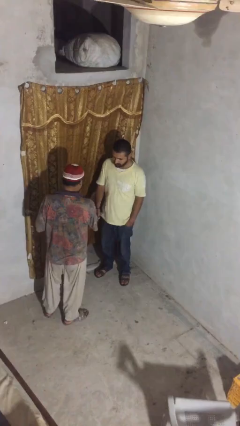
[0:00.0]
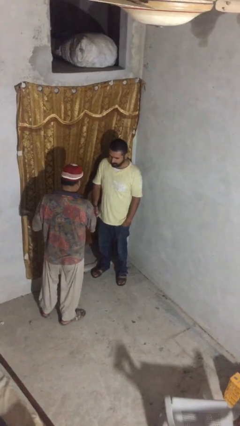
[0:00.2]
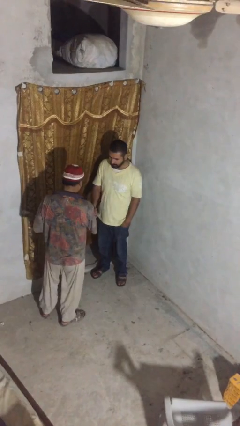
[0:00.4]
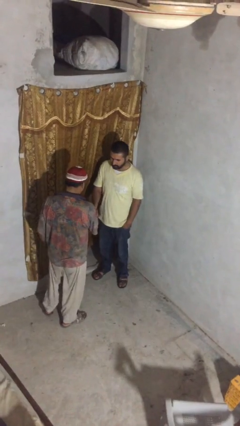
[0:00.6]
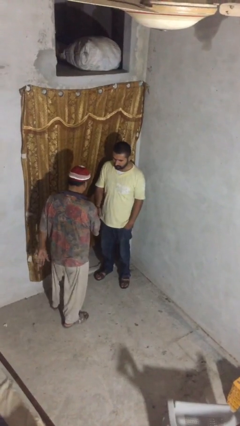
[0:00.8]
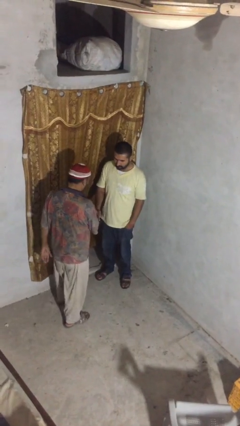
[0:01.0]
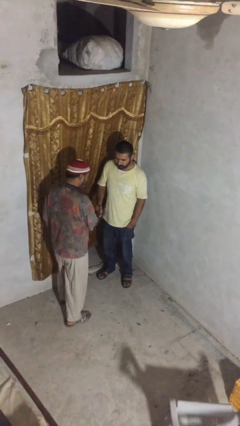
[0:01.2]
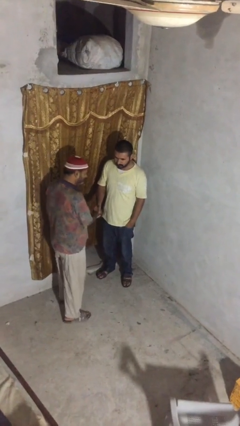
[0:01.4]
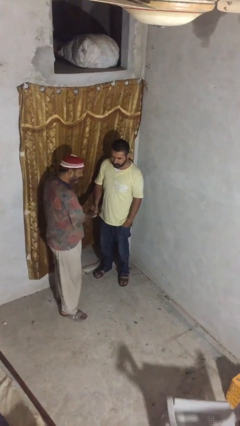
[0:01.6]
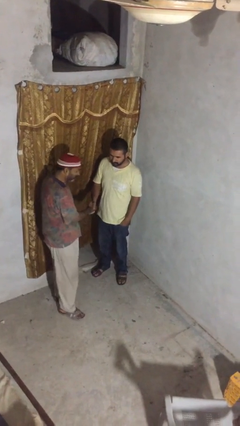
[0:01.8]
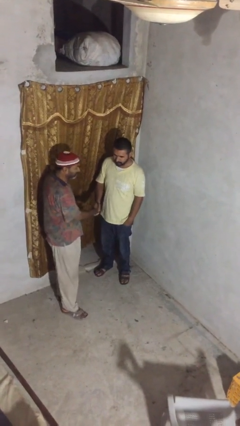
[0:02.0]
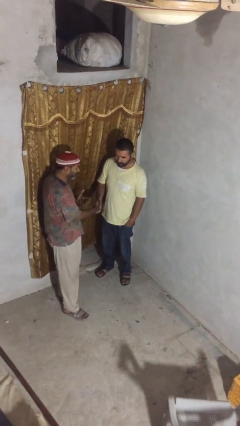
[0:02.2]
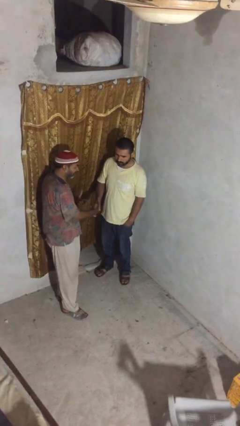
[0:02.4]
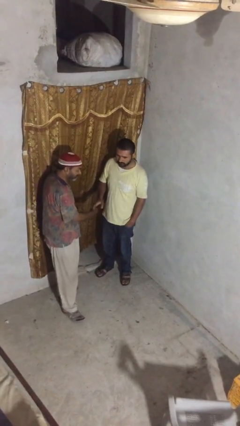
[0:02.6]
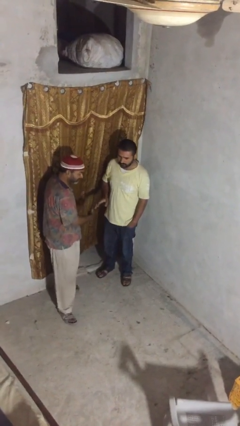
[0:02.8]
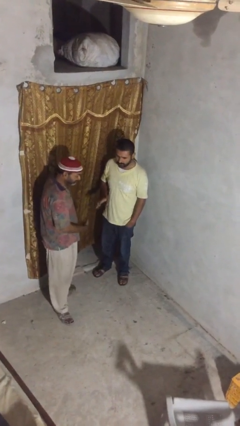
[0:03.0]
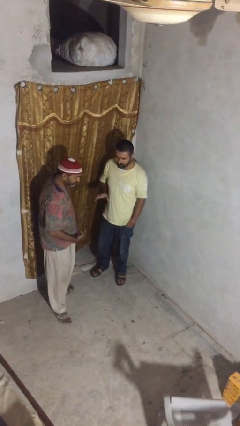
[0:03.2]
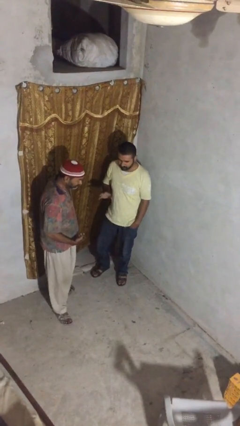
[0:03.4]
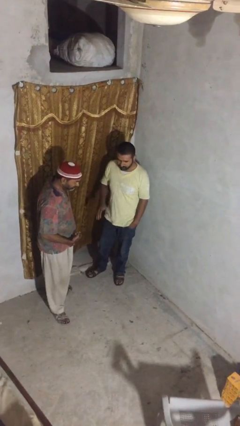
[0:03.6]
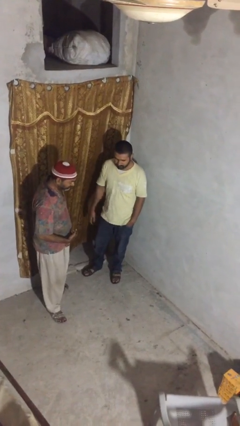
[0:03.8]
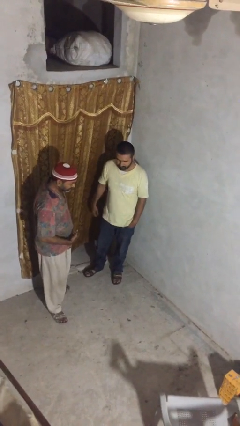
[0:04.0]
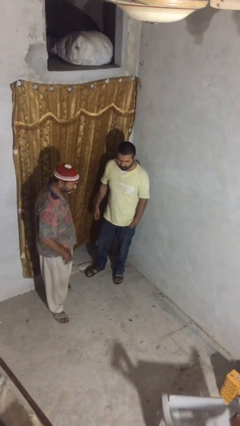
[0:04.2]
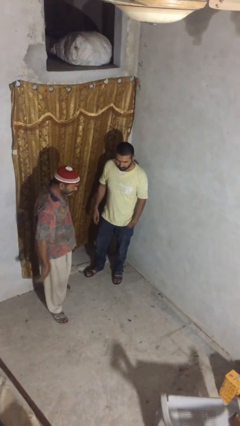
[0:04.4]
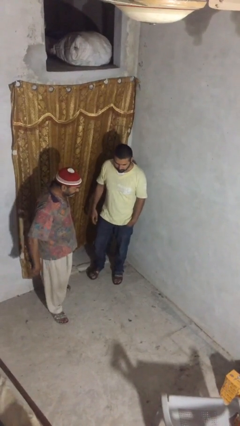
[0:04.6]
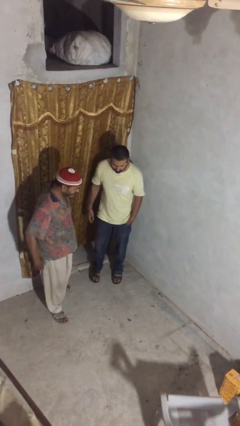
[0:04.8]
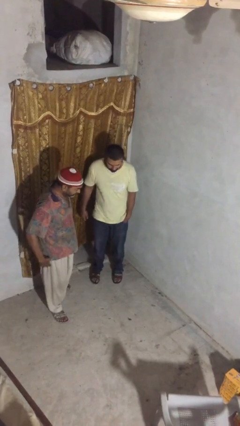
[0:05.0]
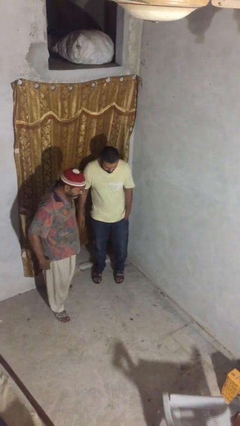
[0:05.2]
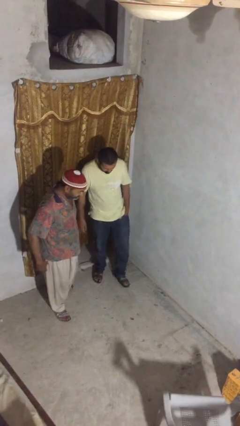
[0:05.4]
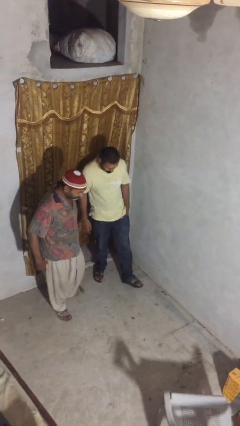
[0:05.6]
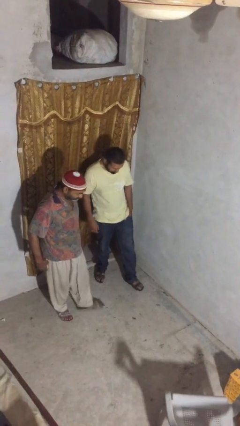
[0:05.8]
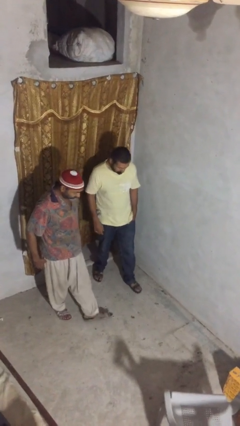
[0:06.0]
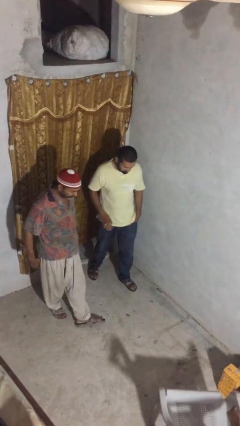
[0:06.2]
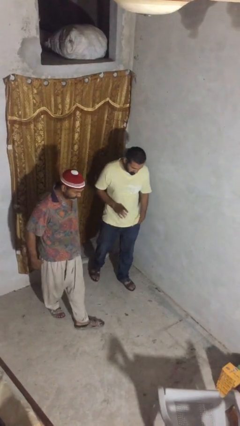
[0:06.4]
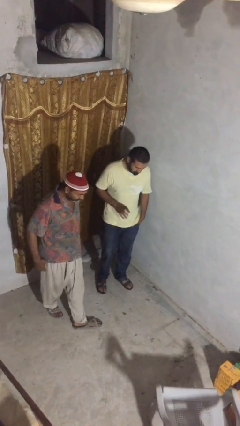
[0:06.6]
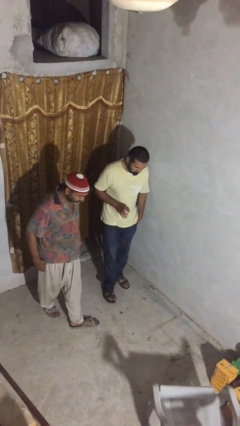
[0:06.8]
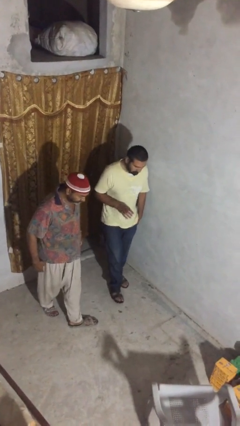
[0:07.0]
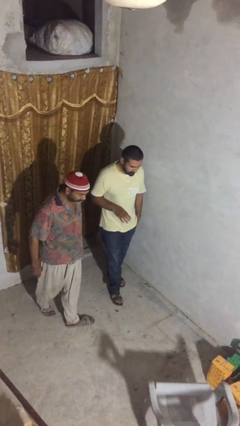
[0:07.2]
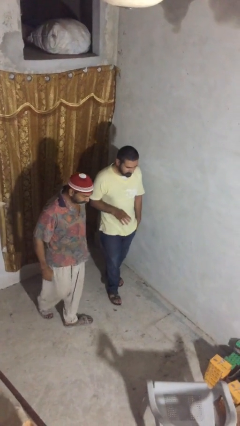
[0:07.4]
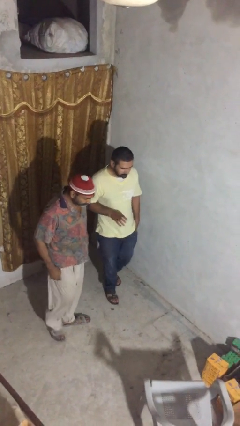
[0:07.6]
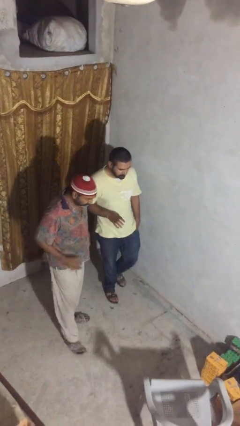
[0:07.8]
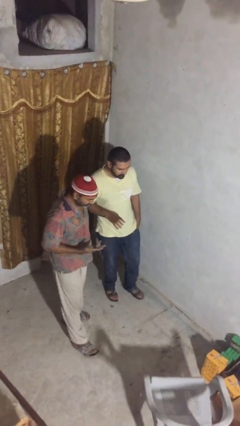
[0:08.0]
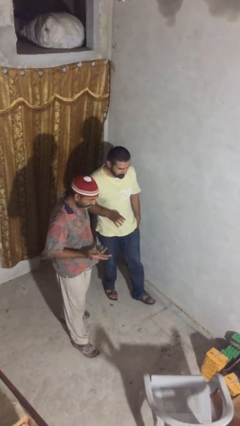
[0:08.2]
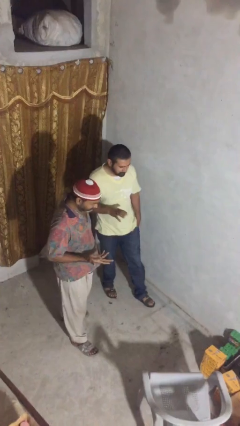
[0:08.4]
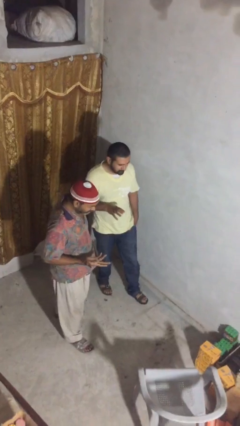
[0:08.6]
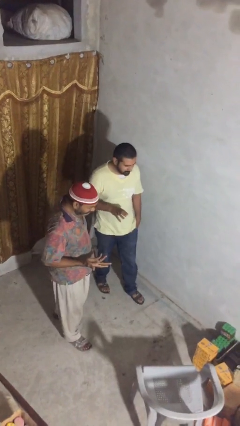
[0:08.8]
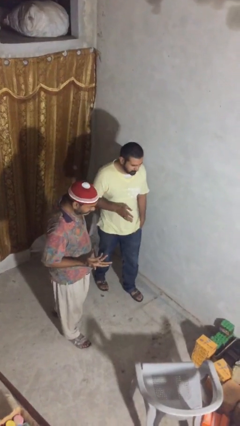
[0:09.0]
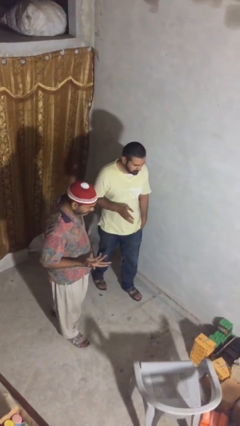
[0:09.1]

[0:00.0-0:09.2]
person talks to person

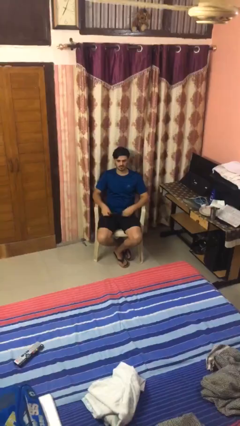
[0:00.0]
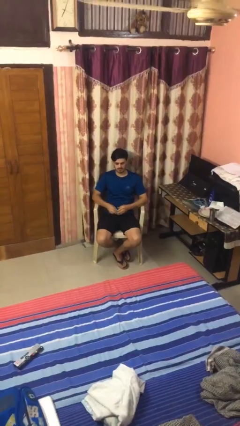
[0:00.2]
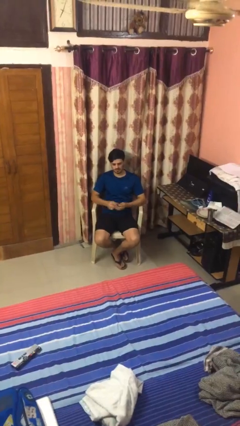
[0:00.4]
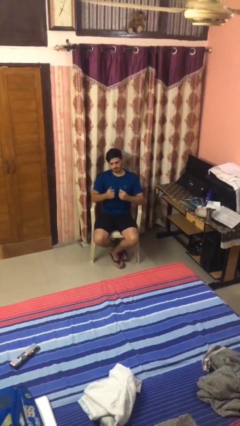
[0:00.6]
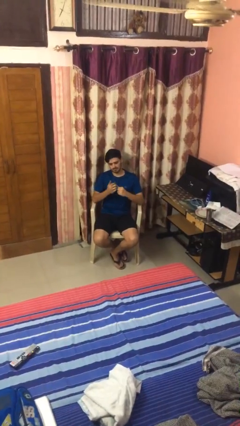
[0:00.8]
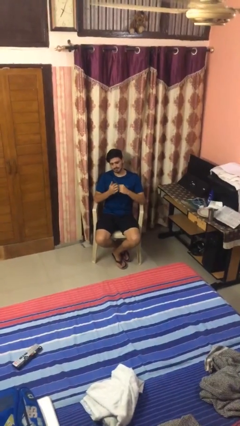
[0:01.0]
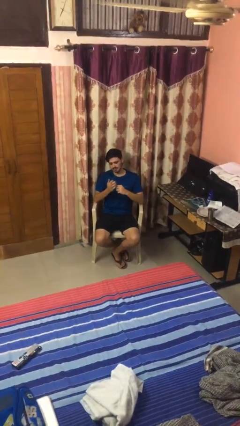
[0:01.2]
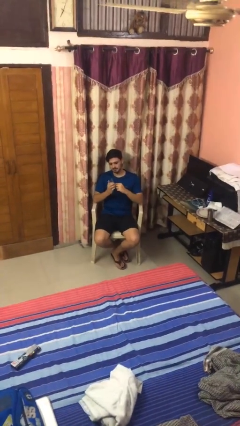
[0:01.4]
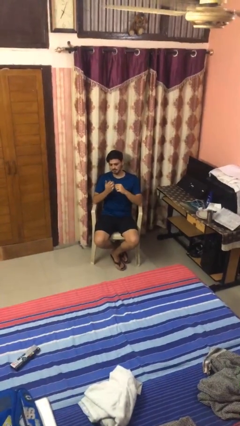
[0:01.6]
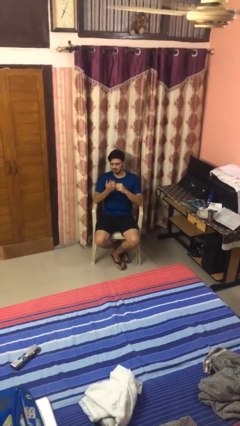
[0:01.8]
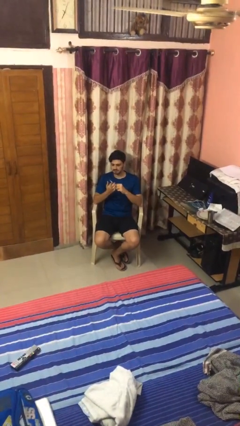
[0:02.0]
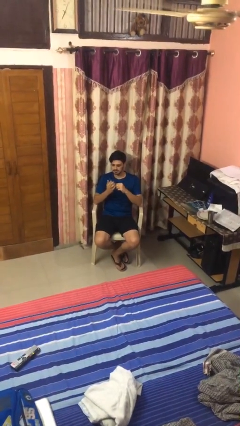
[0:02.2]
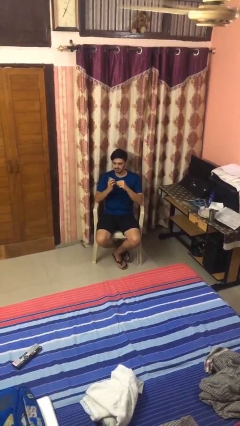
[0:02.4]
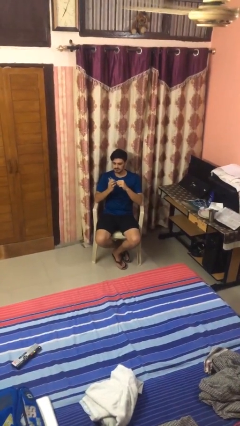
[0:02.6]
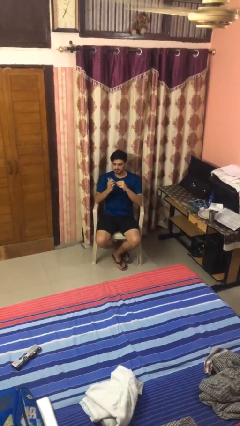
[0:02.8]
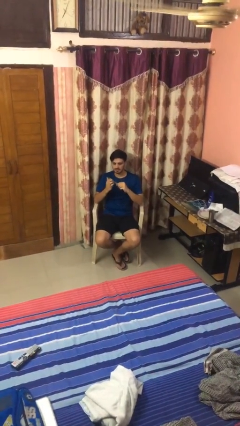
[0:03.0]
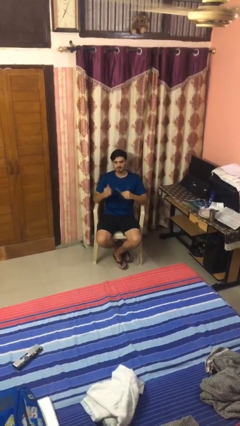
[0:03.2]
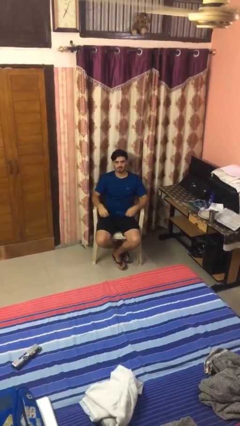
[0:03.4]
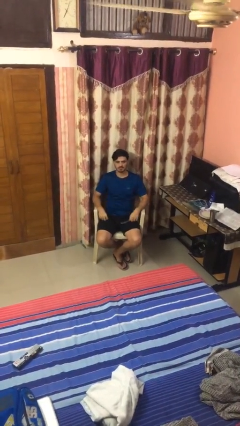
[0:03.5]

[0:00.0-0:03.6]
person files fingernails

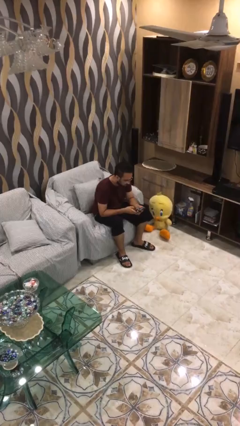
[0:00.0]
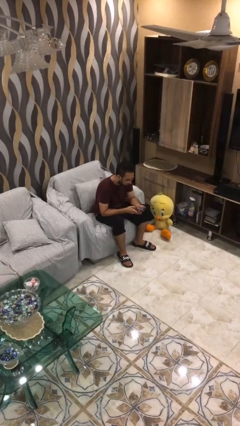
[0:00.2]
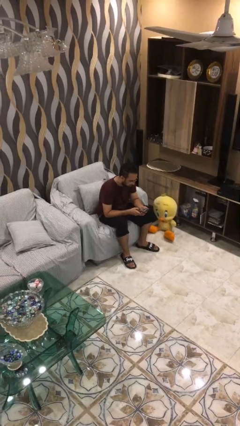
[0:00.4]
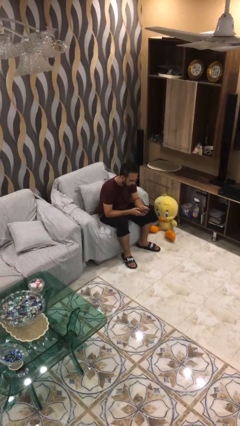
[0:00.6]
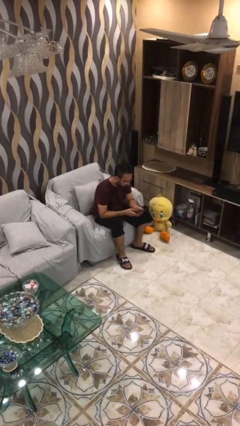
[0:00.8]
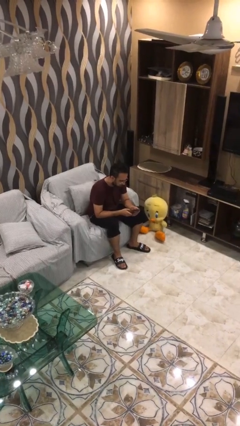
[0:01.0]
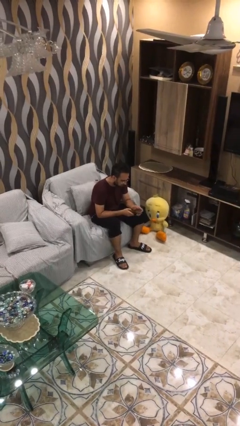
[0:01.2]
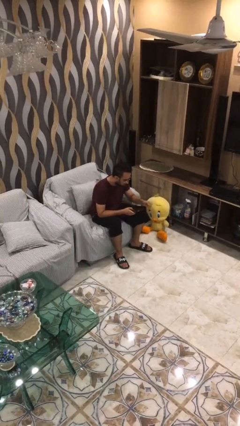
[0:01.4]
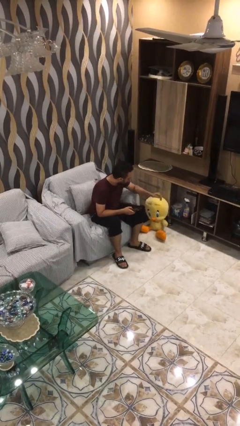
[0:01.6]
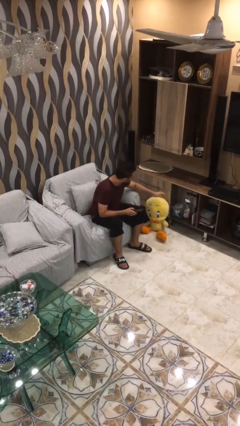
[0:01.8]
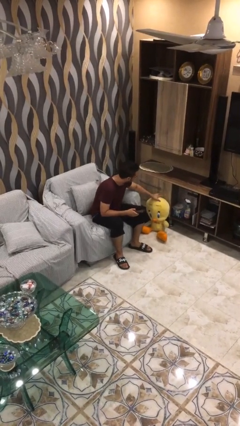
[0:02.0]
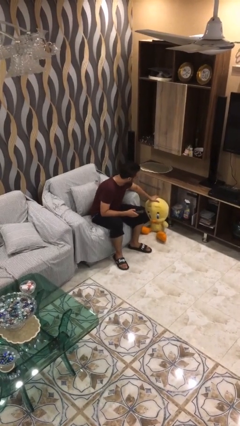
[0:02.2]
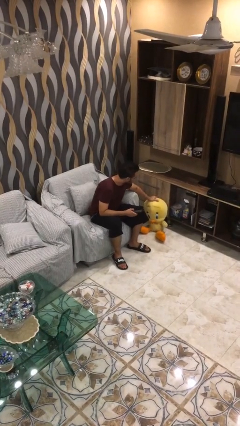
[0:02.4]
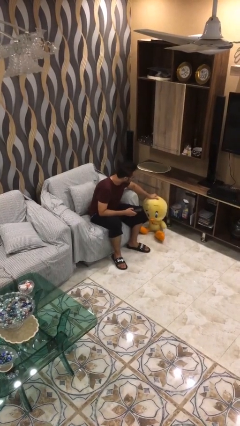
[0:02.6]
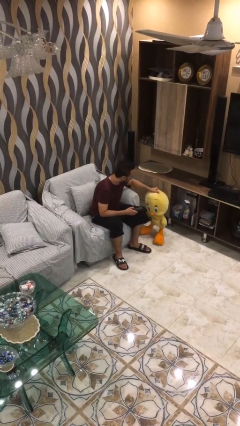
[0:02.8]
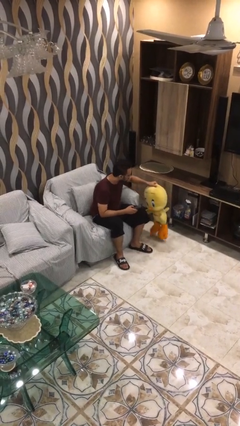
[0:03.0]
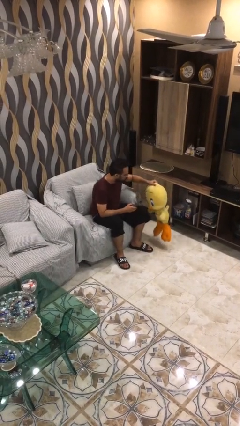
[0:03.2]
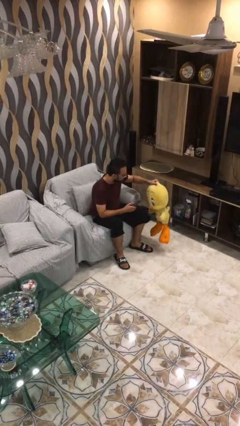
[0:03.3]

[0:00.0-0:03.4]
person picks up object from floor

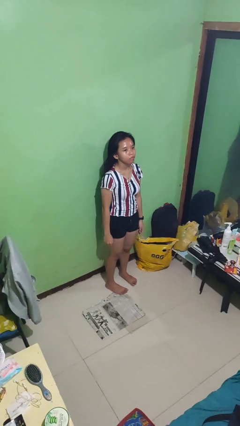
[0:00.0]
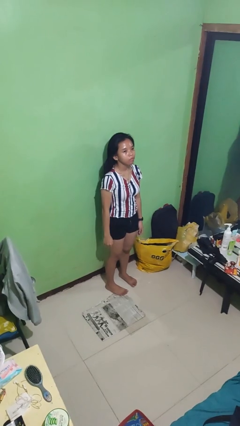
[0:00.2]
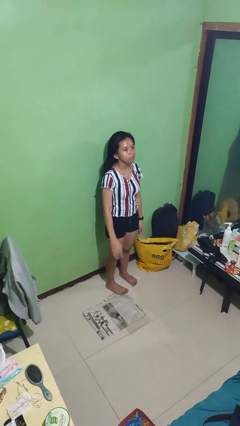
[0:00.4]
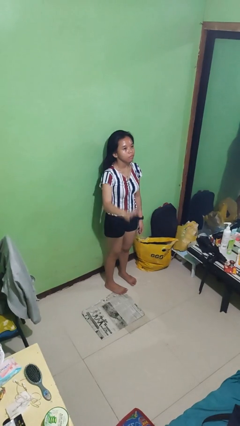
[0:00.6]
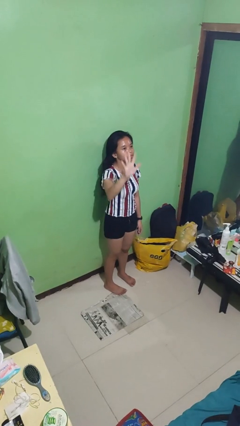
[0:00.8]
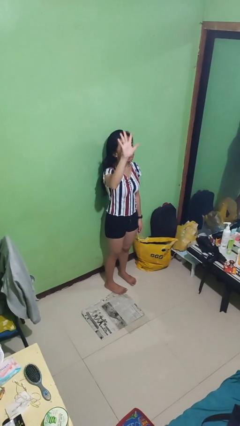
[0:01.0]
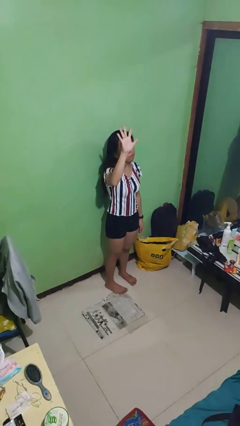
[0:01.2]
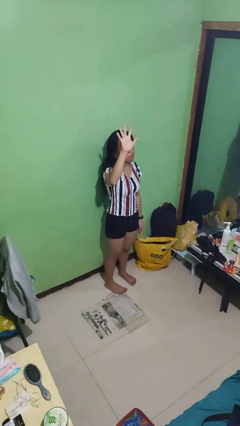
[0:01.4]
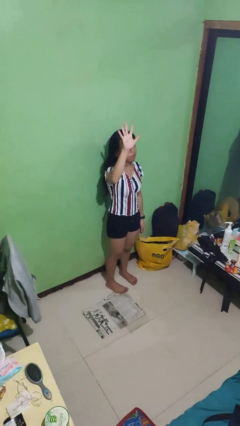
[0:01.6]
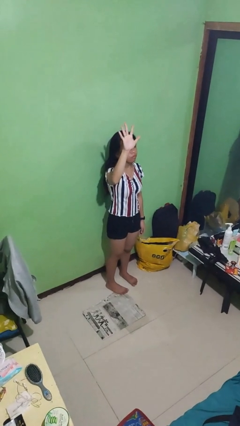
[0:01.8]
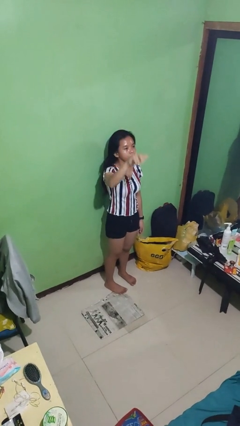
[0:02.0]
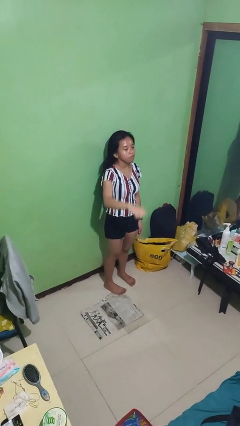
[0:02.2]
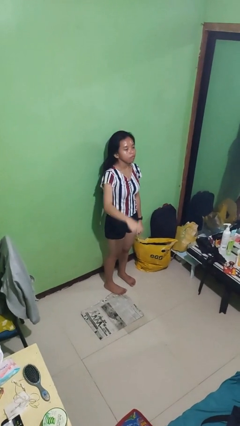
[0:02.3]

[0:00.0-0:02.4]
person gestures number five
